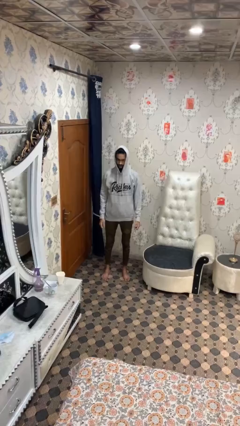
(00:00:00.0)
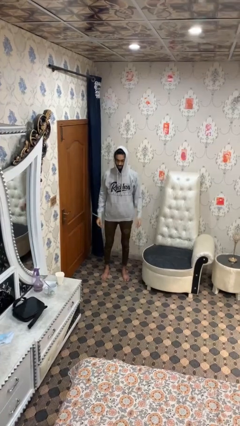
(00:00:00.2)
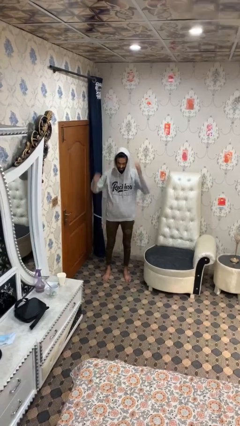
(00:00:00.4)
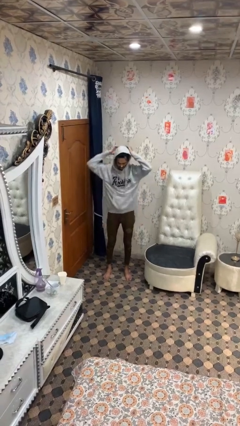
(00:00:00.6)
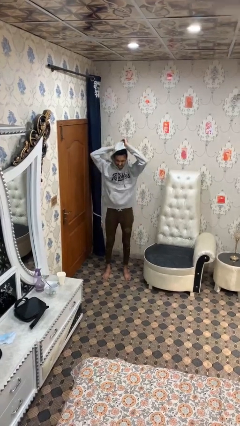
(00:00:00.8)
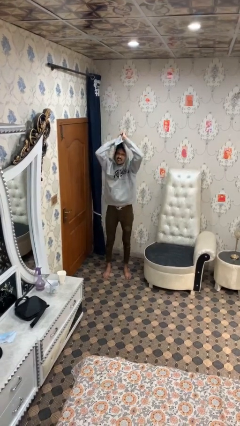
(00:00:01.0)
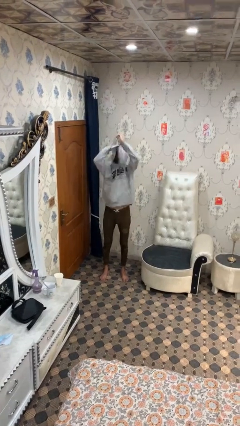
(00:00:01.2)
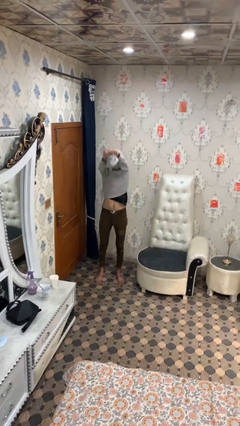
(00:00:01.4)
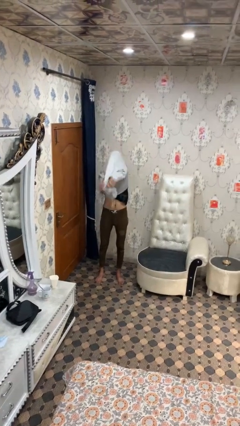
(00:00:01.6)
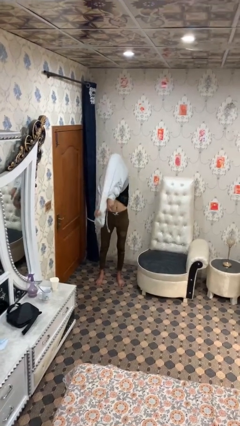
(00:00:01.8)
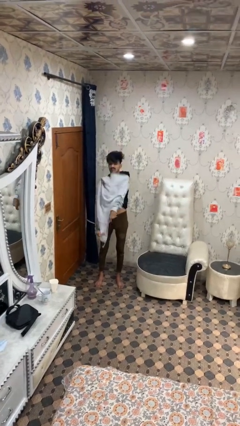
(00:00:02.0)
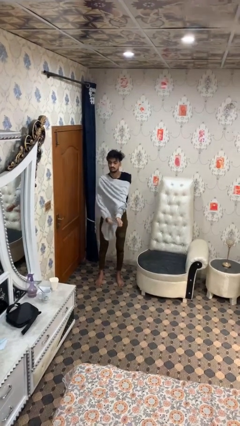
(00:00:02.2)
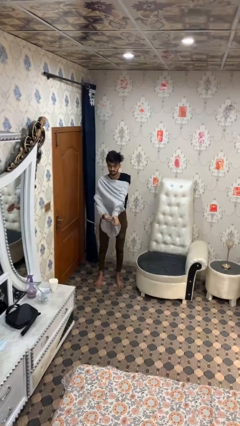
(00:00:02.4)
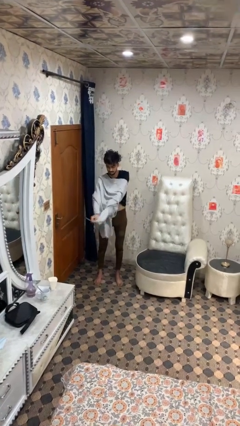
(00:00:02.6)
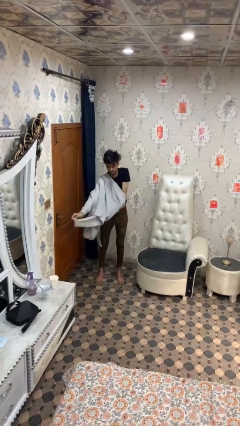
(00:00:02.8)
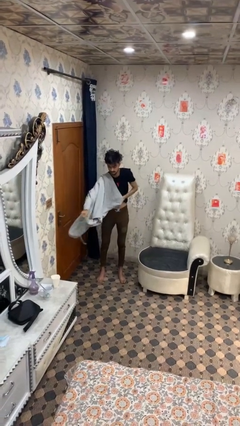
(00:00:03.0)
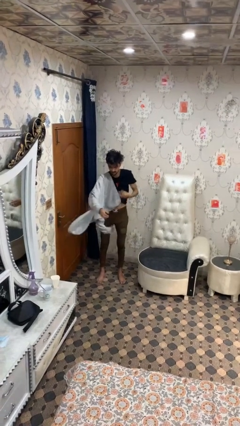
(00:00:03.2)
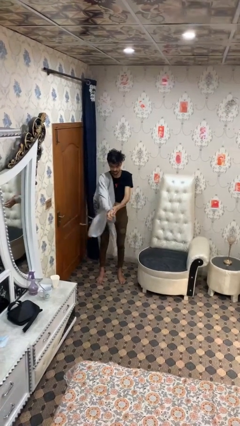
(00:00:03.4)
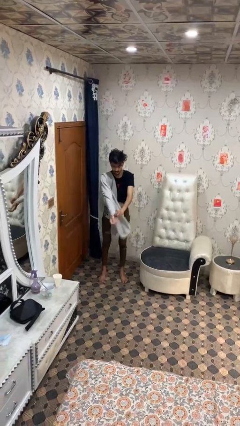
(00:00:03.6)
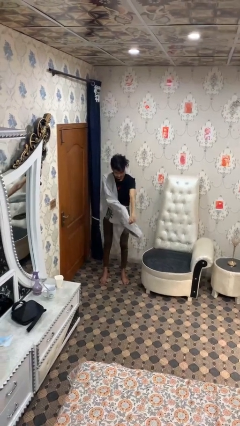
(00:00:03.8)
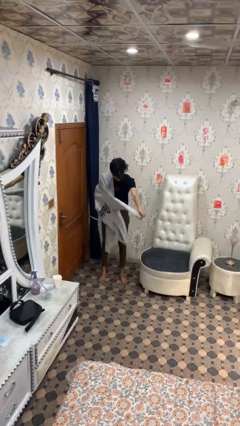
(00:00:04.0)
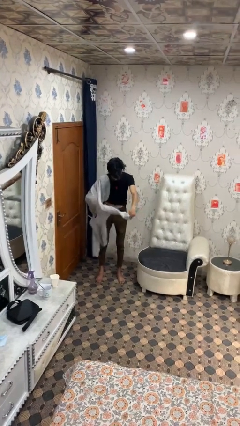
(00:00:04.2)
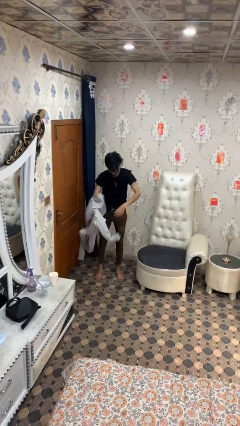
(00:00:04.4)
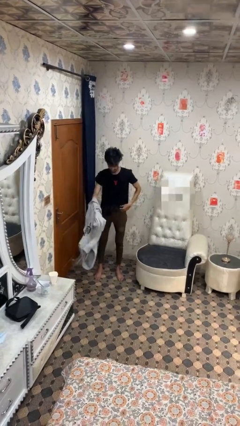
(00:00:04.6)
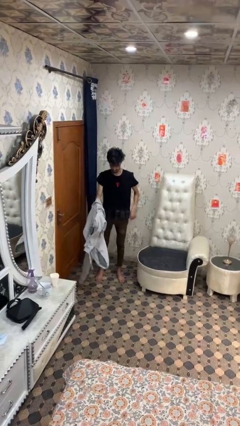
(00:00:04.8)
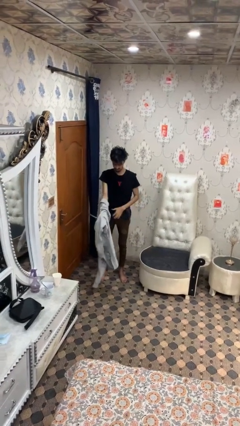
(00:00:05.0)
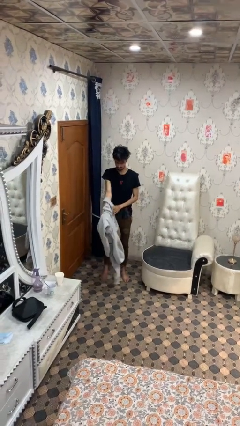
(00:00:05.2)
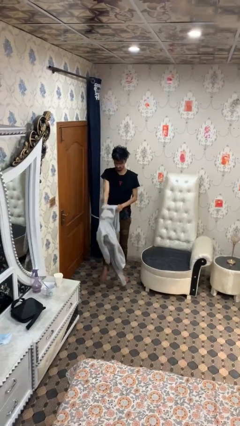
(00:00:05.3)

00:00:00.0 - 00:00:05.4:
person takes off hoodie

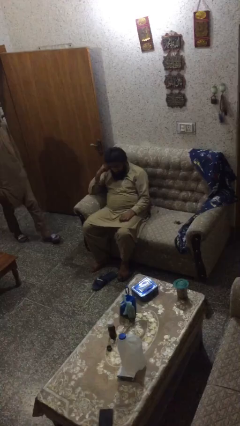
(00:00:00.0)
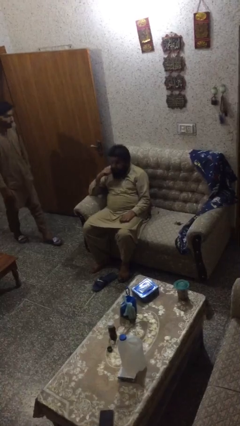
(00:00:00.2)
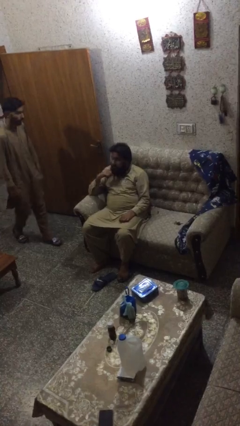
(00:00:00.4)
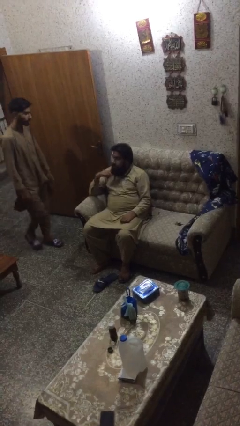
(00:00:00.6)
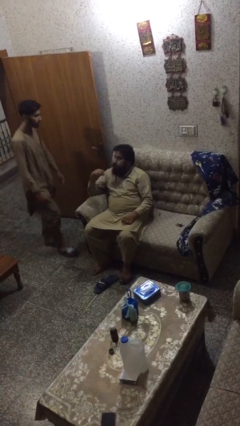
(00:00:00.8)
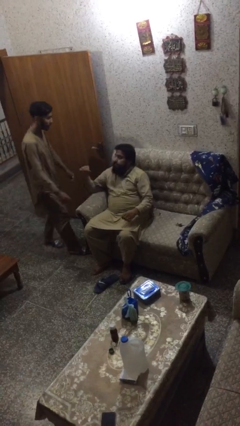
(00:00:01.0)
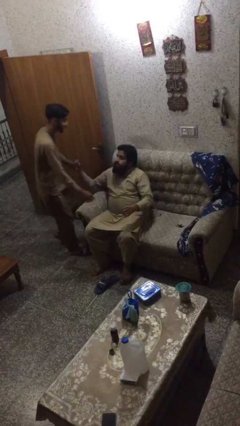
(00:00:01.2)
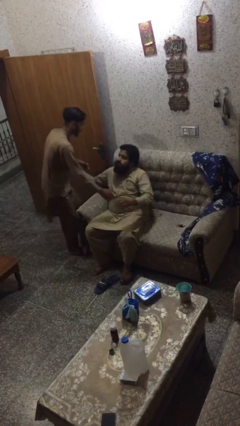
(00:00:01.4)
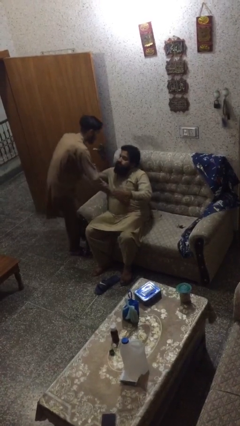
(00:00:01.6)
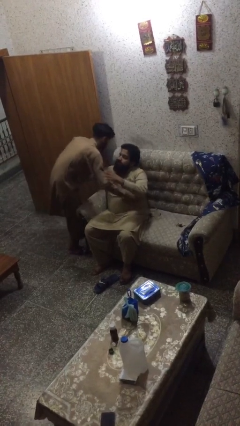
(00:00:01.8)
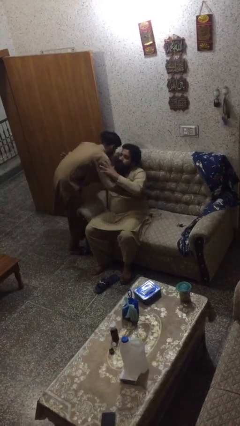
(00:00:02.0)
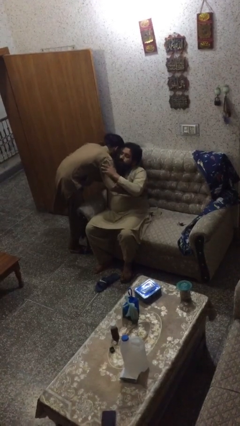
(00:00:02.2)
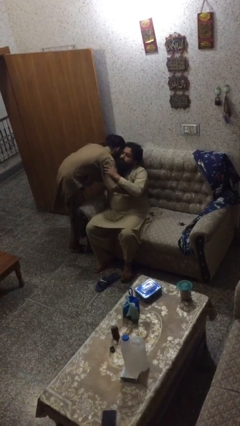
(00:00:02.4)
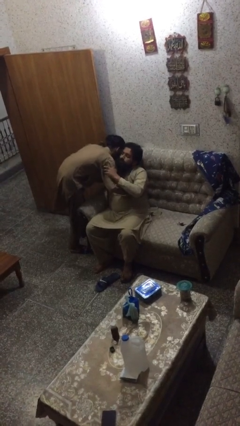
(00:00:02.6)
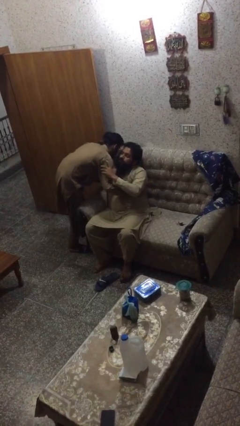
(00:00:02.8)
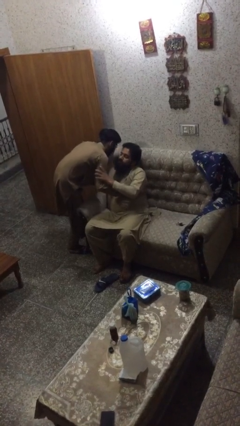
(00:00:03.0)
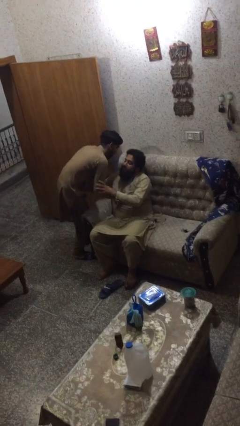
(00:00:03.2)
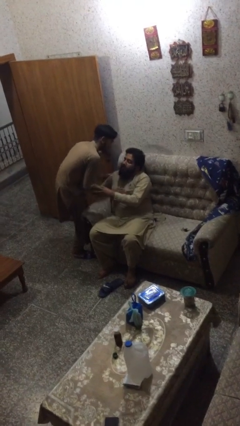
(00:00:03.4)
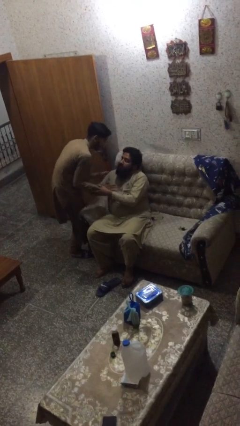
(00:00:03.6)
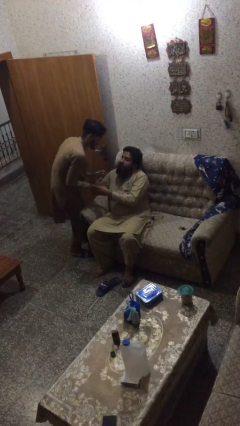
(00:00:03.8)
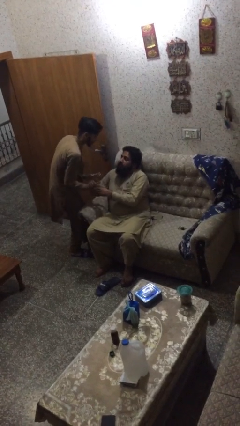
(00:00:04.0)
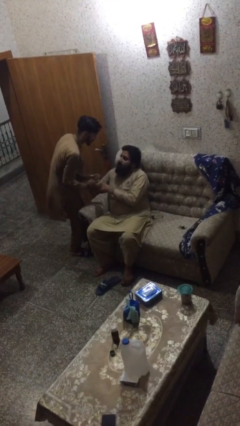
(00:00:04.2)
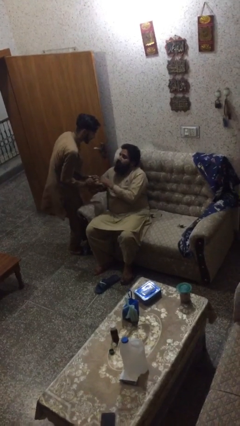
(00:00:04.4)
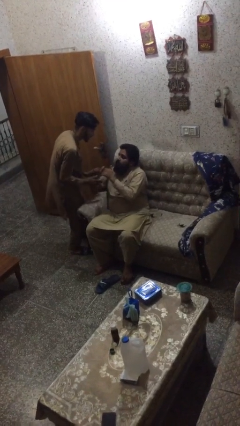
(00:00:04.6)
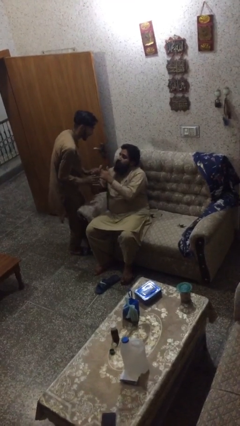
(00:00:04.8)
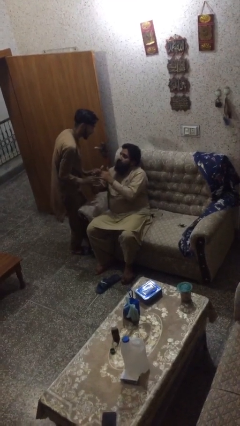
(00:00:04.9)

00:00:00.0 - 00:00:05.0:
person embraces person

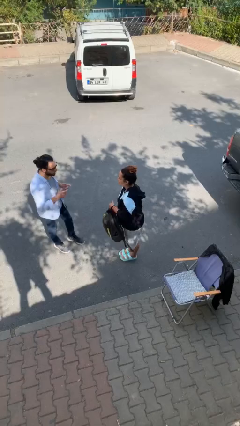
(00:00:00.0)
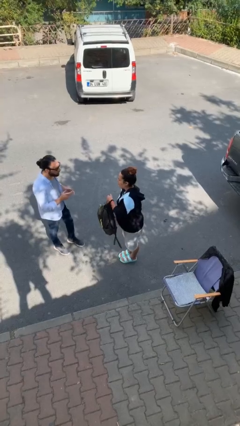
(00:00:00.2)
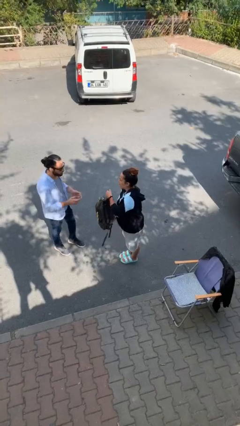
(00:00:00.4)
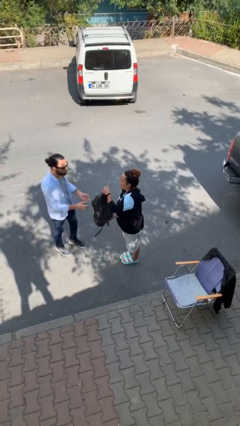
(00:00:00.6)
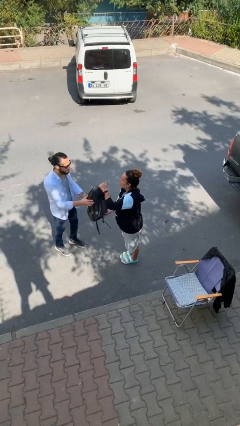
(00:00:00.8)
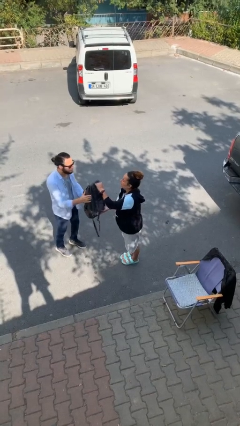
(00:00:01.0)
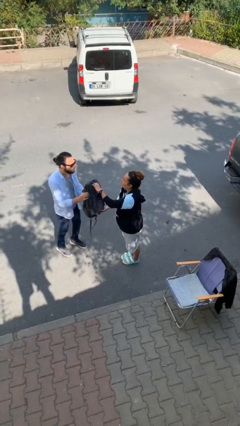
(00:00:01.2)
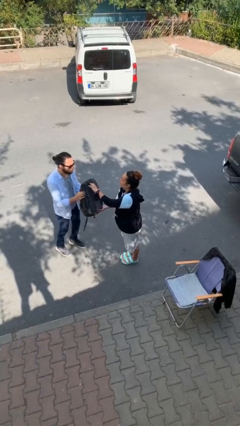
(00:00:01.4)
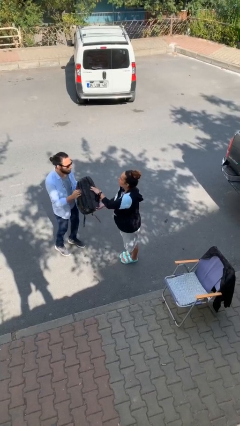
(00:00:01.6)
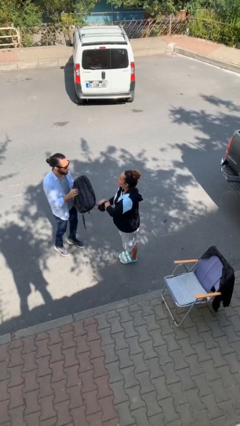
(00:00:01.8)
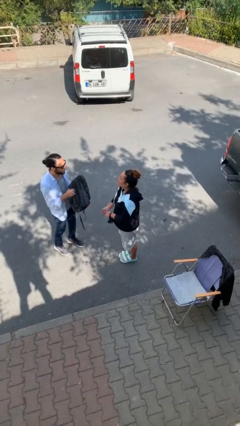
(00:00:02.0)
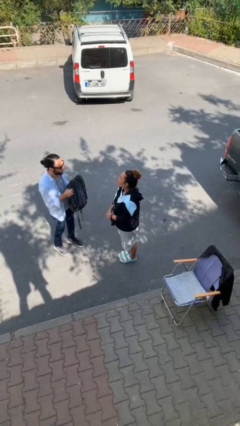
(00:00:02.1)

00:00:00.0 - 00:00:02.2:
person transfers object to person

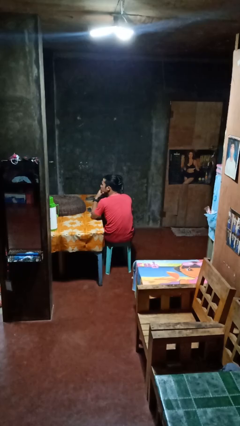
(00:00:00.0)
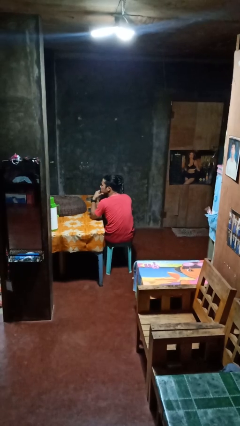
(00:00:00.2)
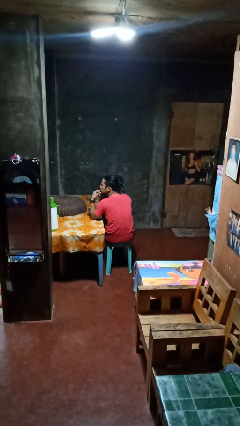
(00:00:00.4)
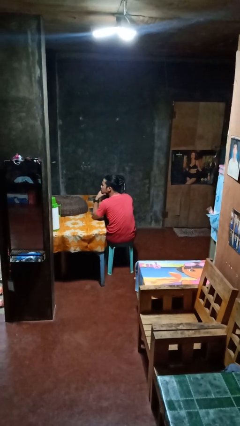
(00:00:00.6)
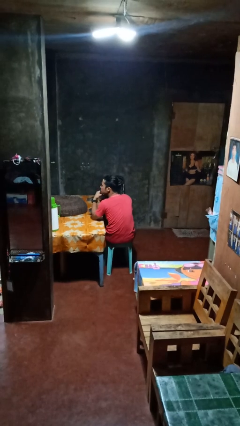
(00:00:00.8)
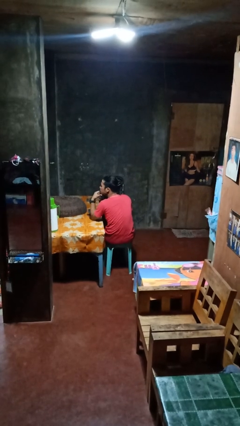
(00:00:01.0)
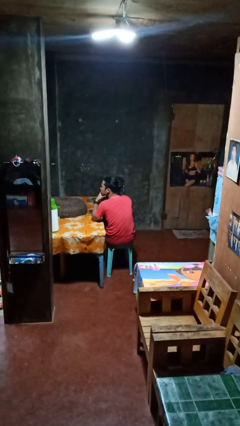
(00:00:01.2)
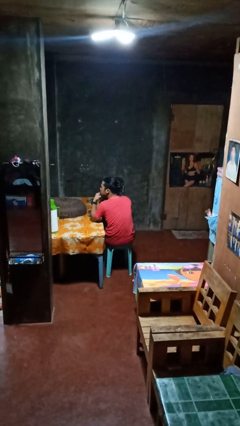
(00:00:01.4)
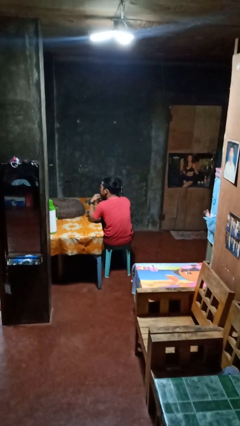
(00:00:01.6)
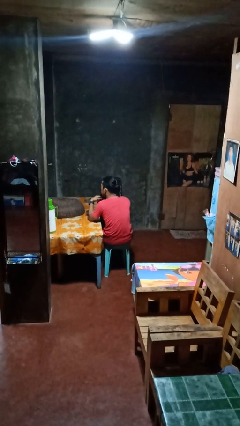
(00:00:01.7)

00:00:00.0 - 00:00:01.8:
person strokes chin

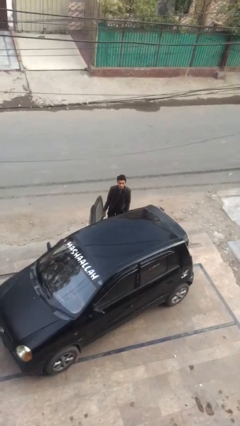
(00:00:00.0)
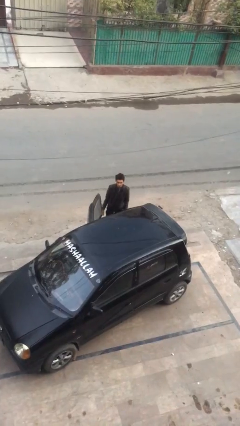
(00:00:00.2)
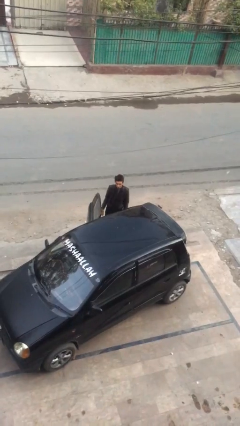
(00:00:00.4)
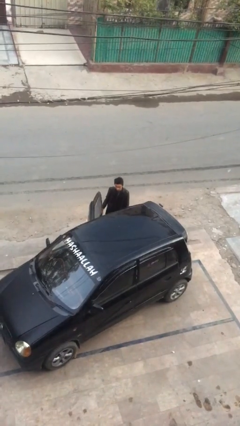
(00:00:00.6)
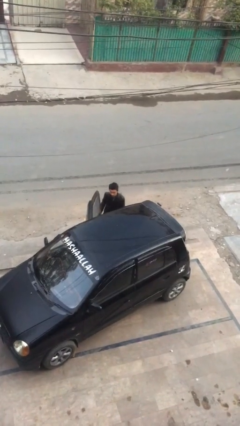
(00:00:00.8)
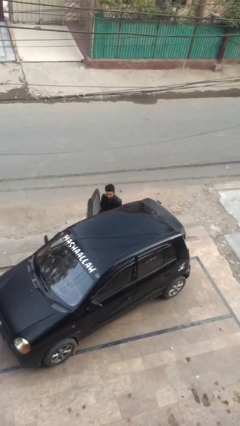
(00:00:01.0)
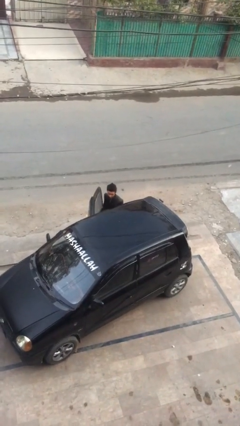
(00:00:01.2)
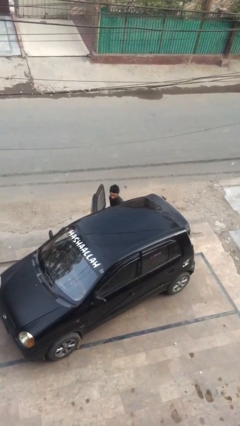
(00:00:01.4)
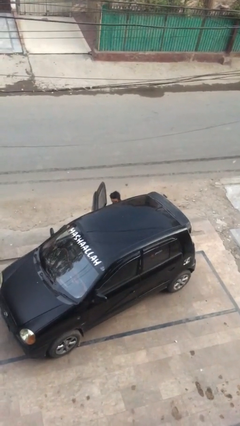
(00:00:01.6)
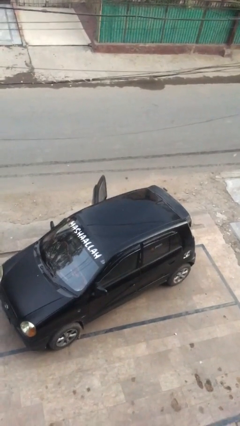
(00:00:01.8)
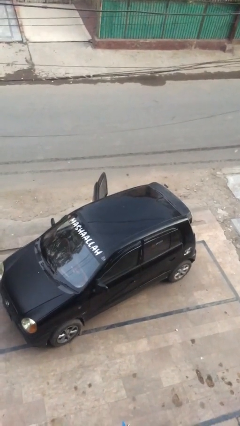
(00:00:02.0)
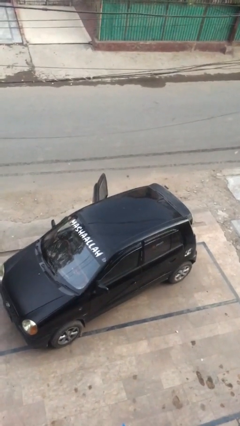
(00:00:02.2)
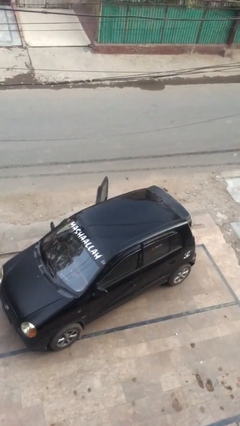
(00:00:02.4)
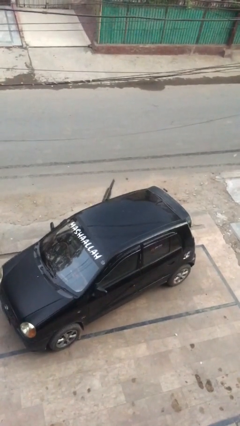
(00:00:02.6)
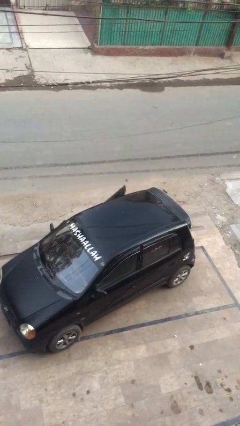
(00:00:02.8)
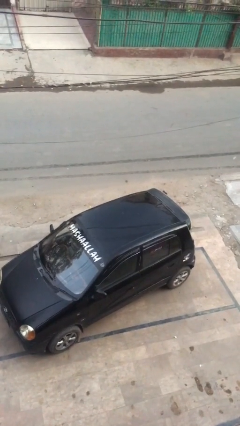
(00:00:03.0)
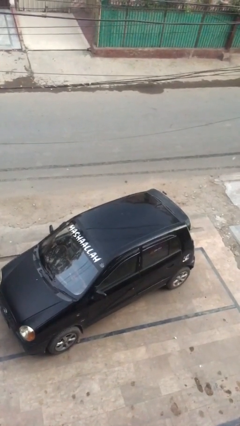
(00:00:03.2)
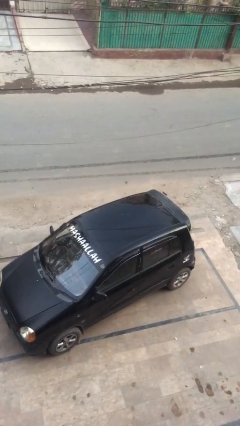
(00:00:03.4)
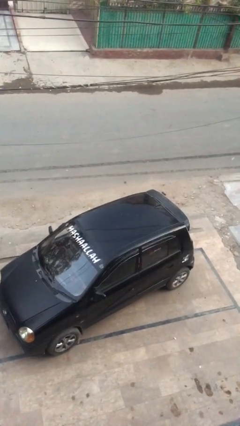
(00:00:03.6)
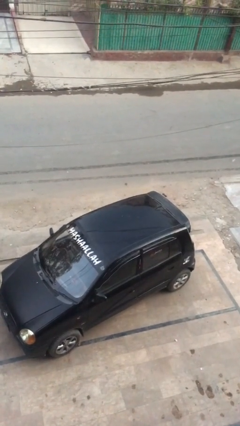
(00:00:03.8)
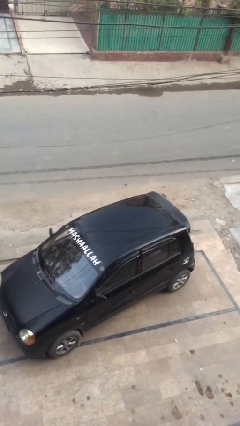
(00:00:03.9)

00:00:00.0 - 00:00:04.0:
person enters car